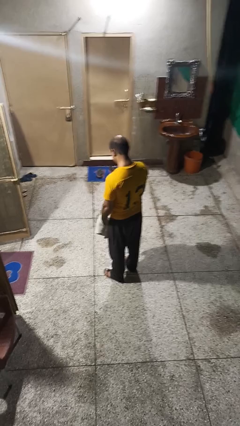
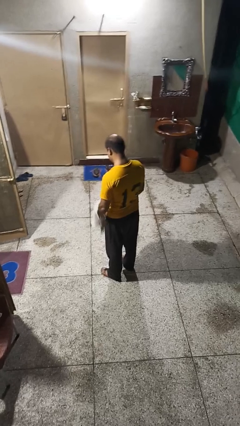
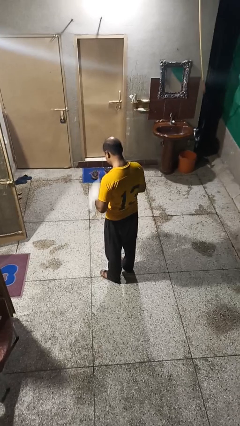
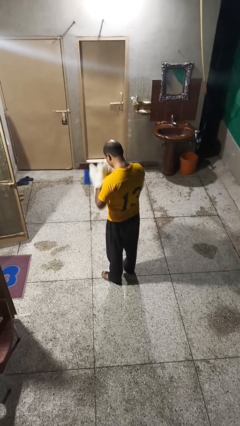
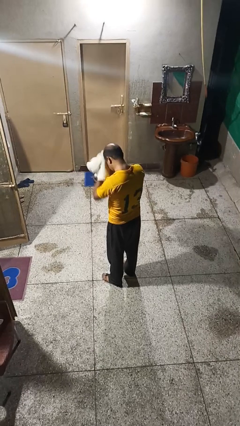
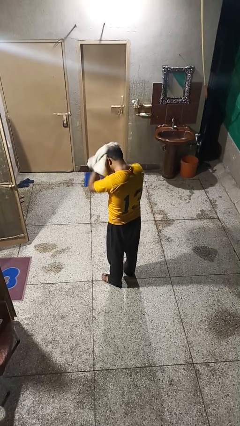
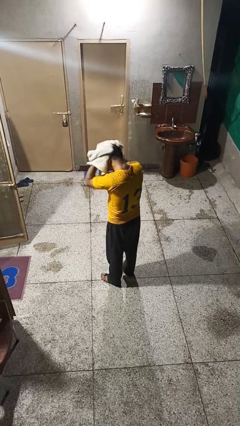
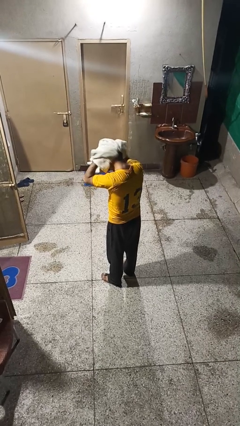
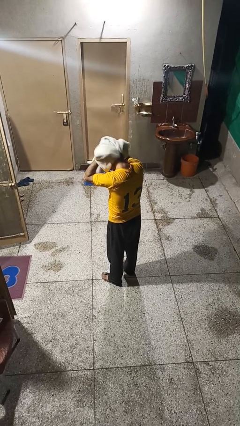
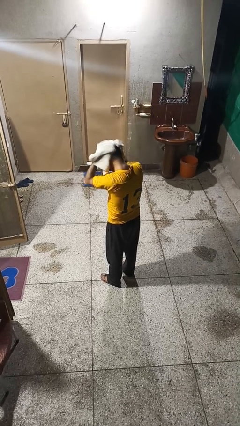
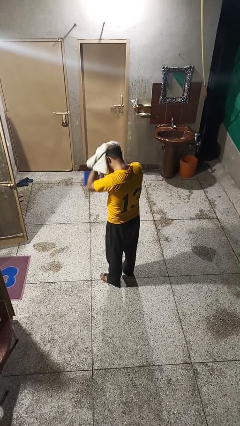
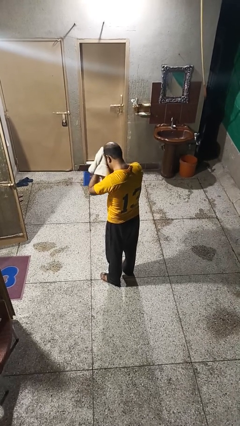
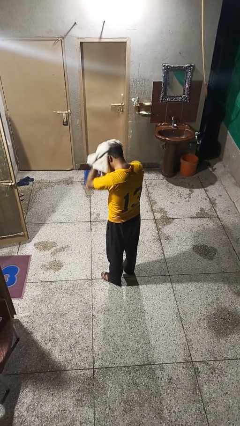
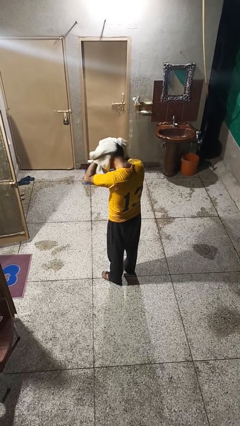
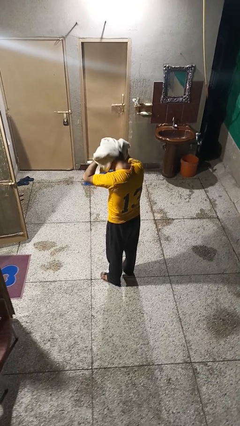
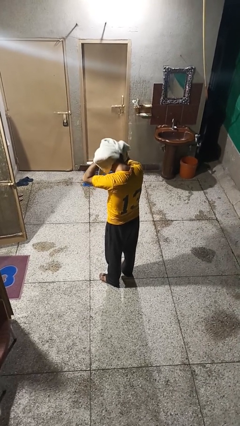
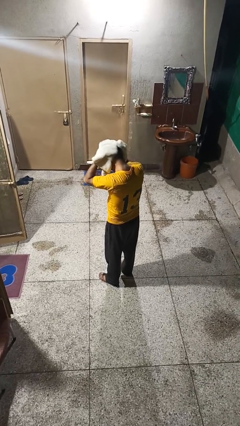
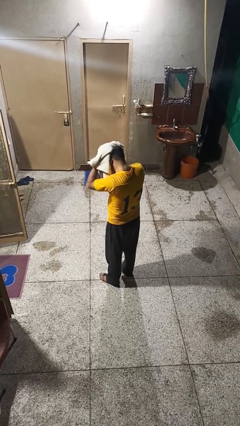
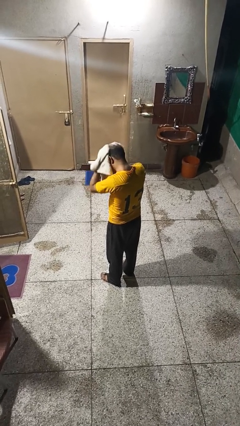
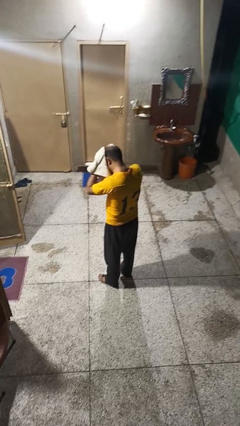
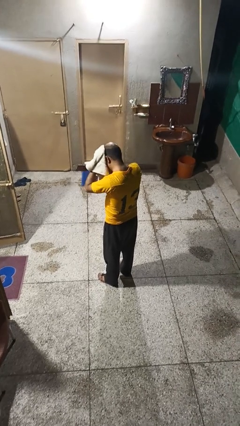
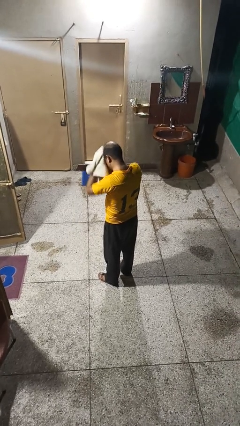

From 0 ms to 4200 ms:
person dries hair with towel

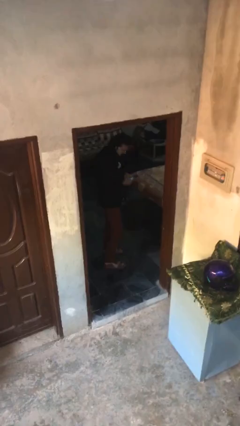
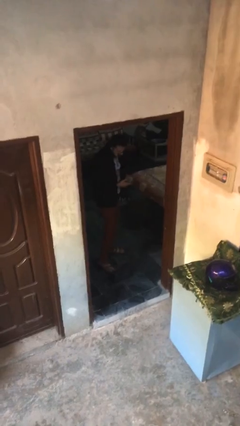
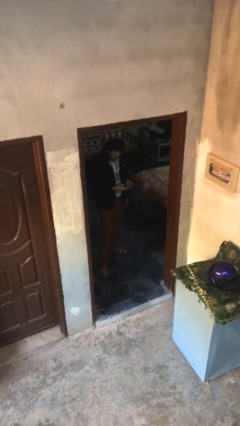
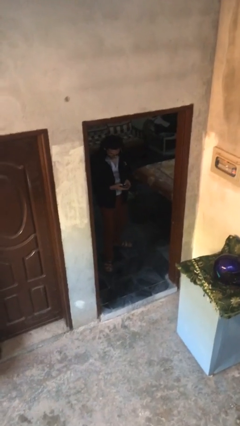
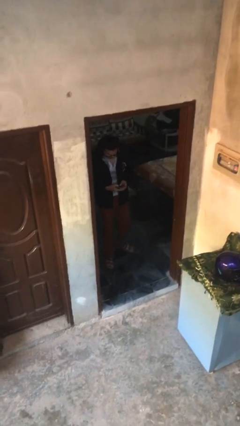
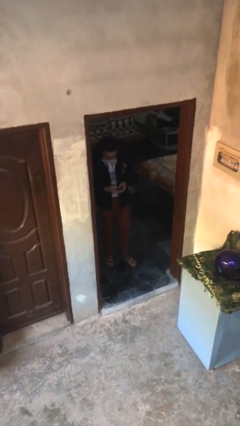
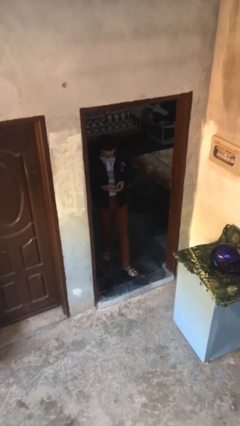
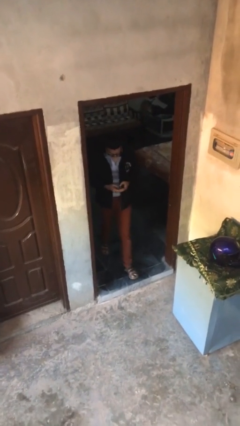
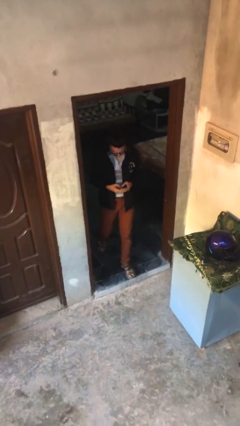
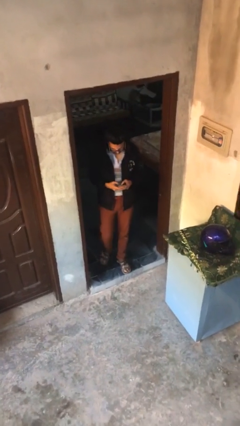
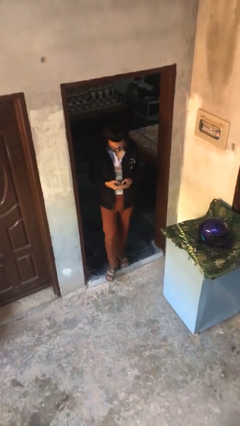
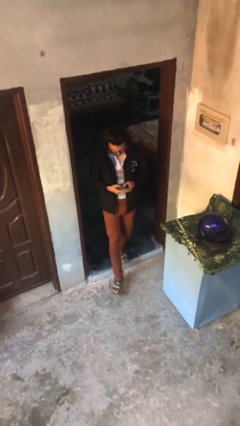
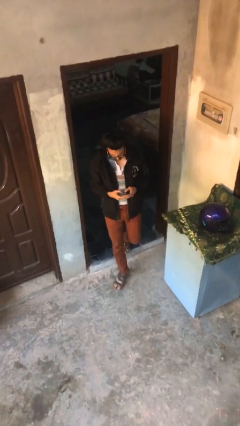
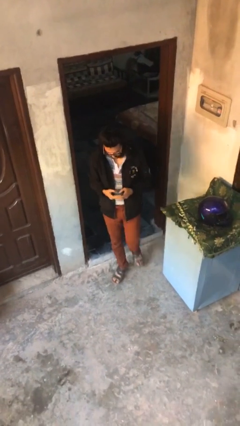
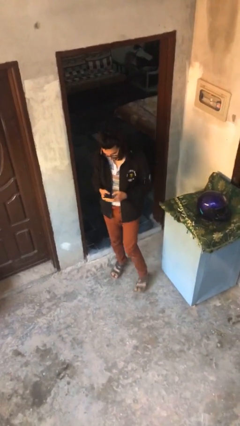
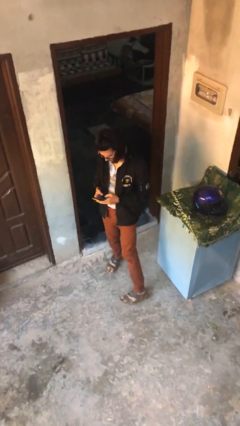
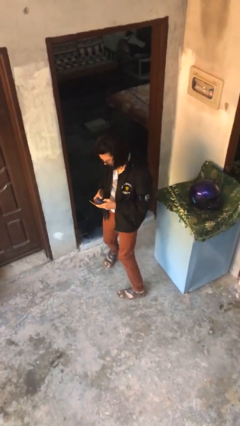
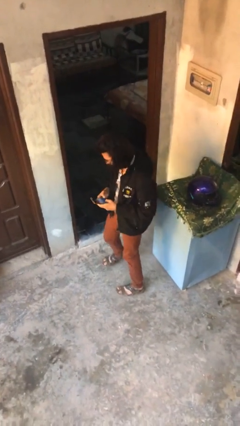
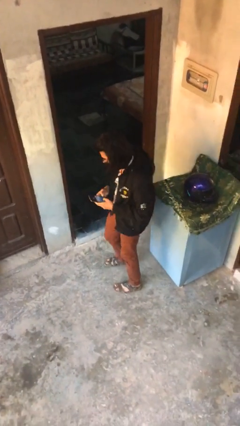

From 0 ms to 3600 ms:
person exits scene through structure

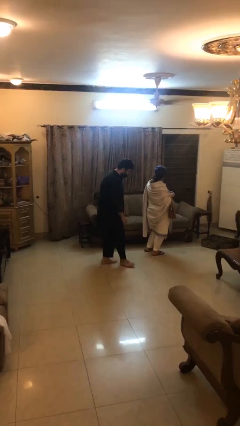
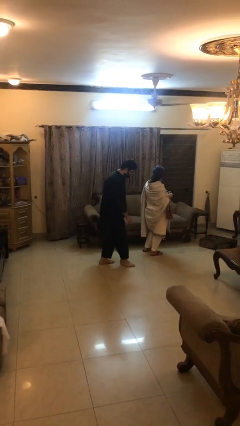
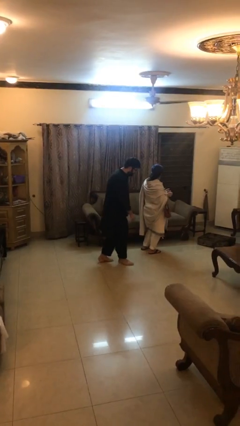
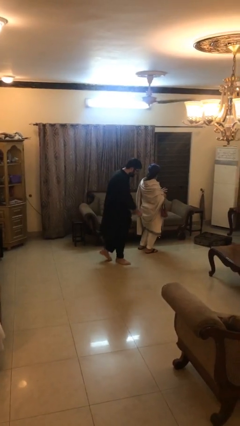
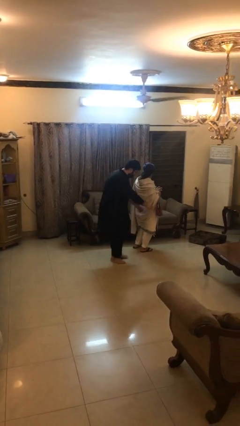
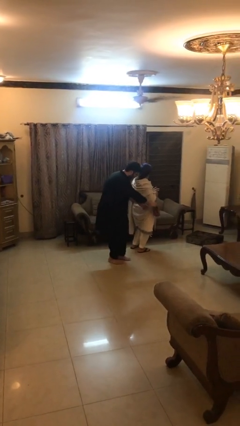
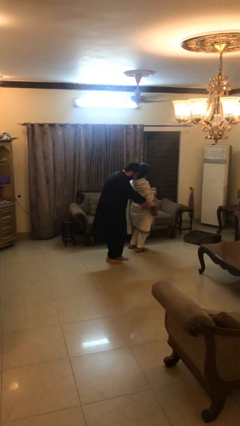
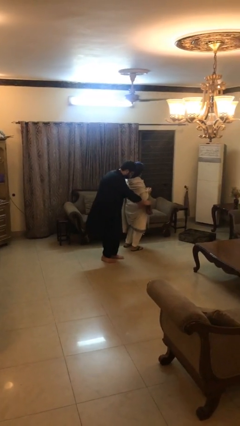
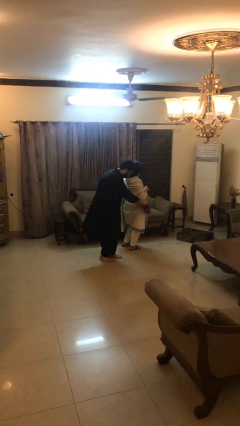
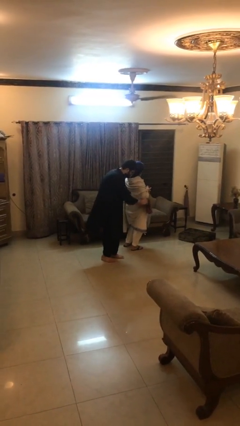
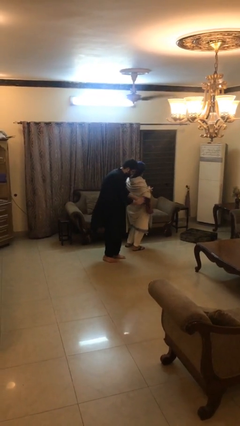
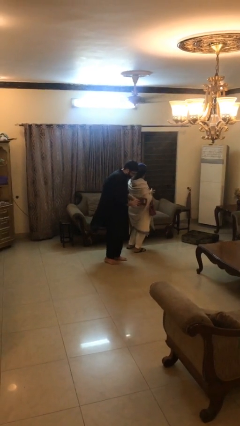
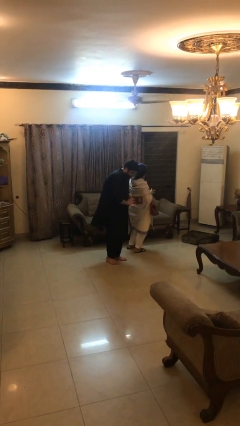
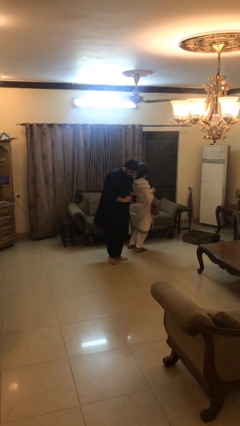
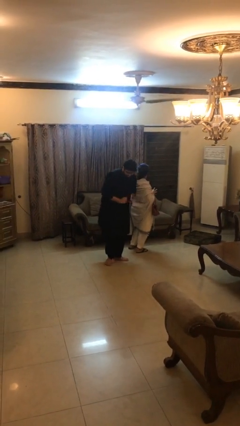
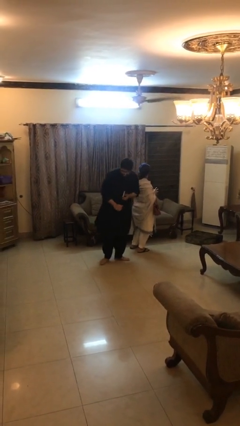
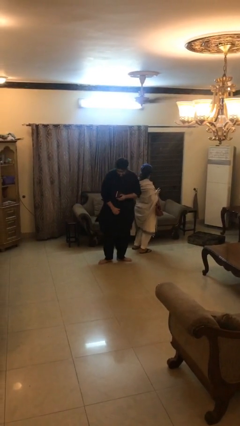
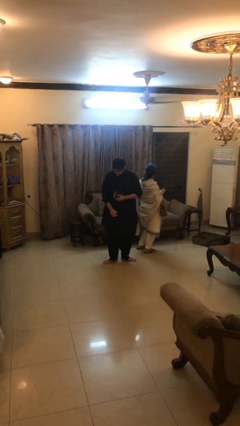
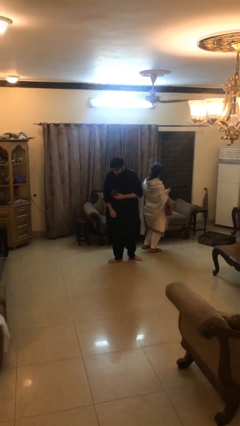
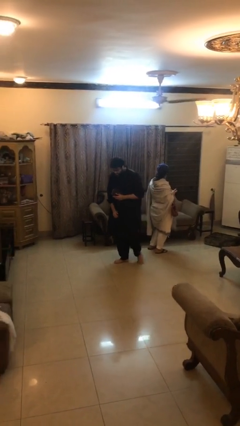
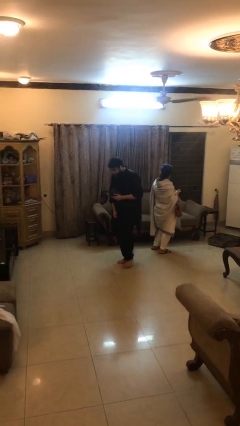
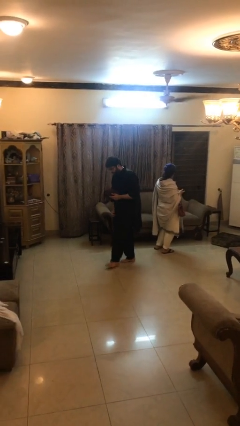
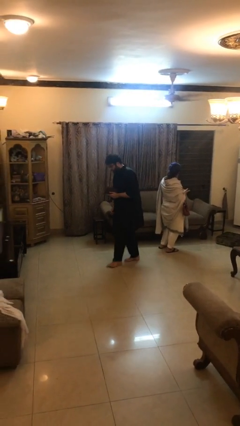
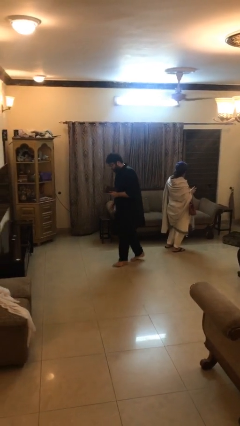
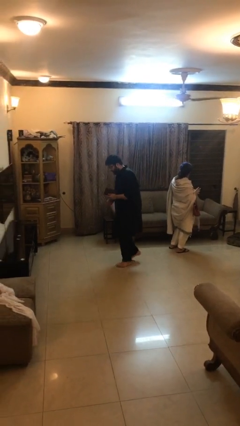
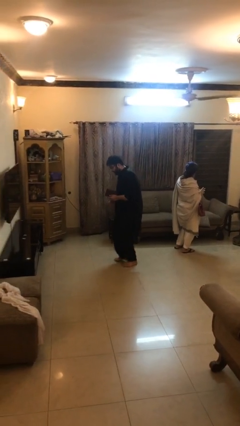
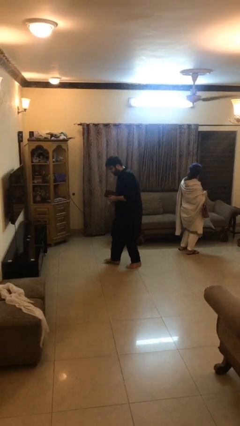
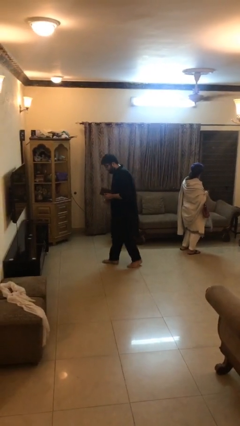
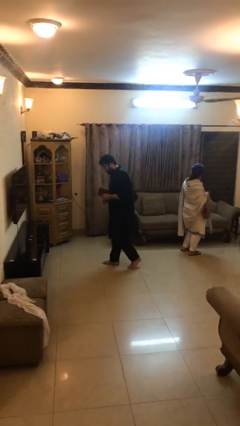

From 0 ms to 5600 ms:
person steals object from person

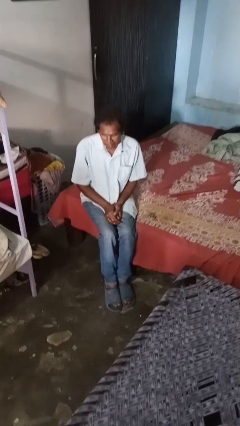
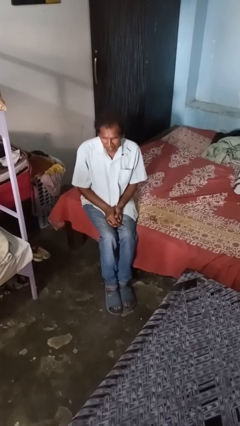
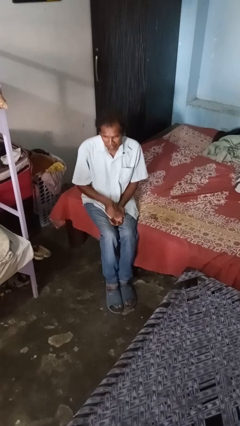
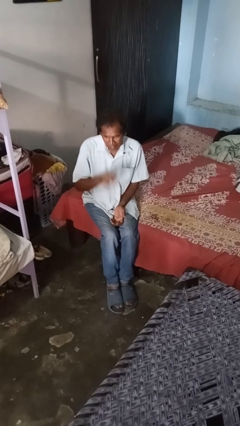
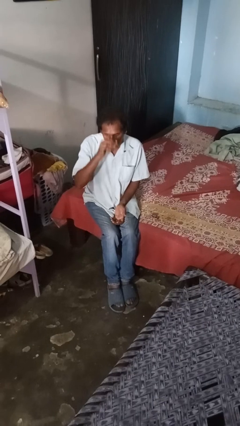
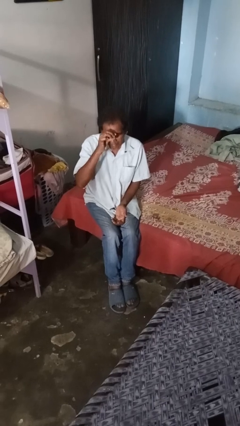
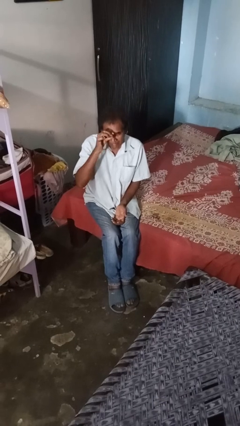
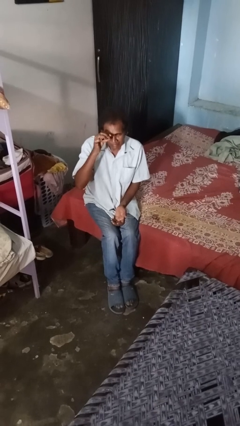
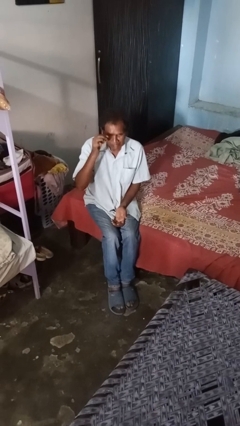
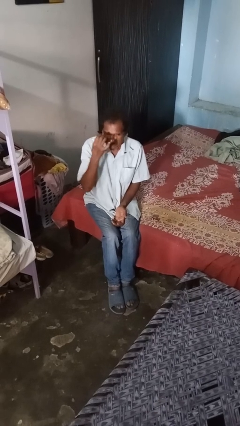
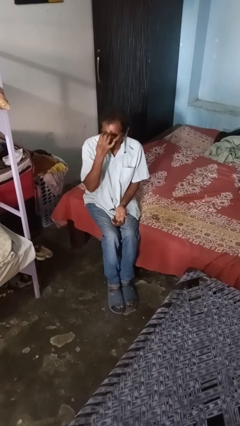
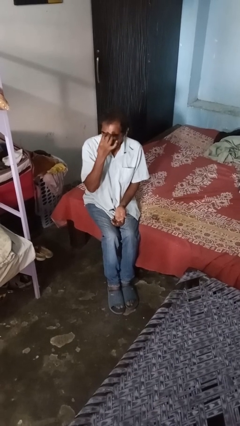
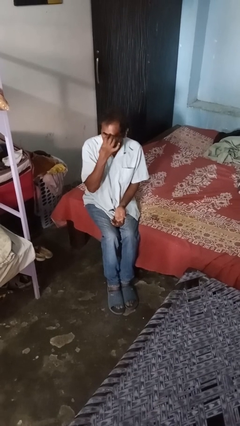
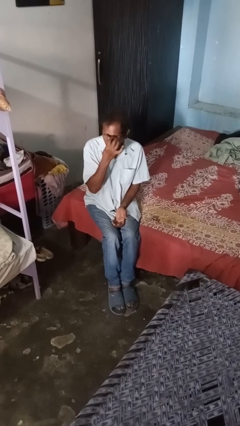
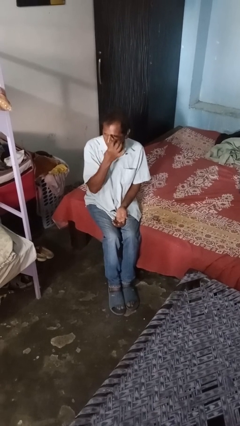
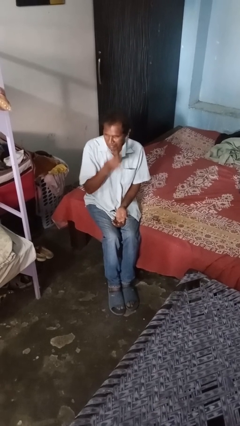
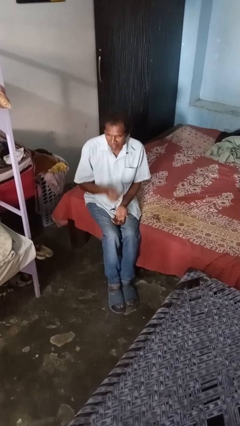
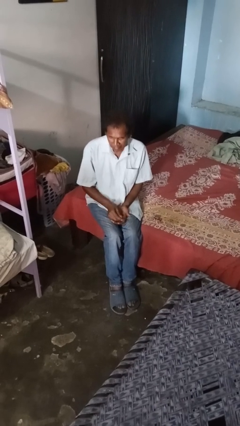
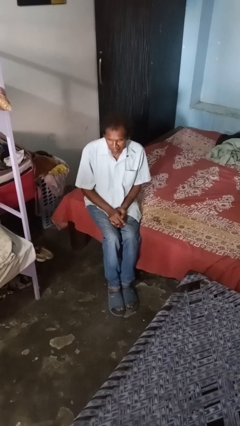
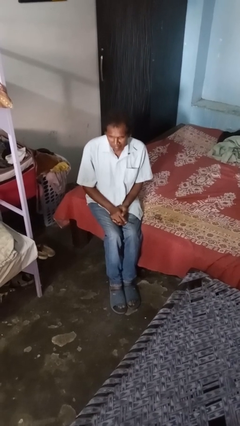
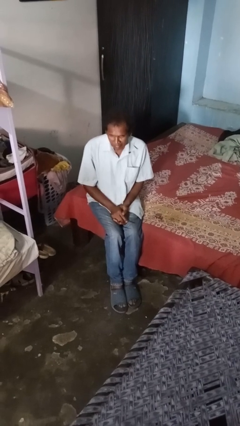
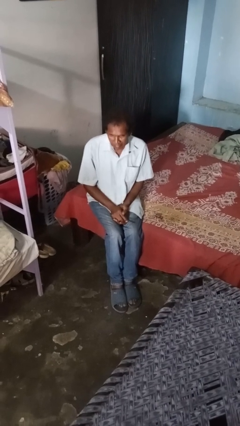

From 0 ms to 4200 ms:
person applies eye makeup
